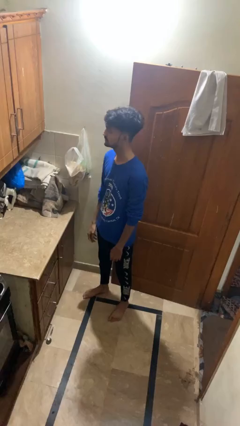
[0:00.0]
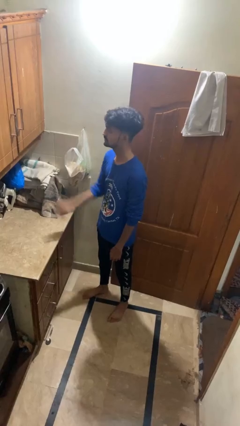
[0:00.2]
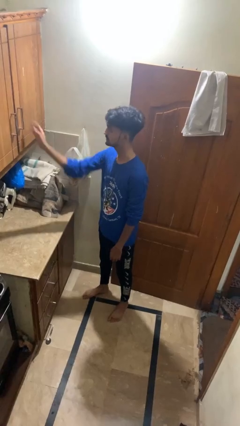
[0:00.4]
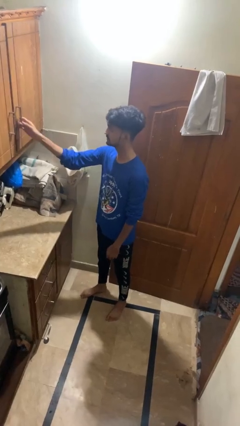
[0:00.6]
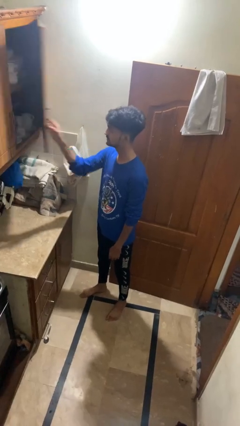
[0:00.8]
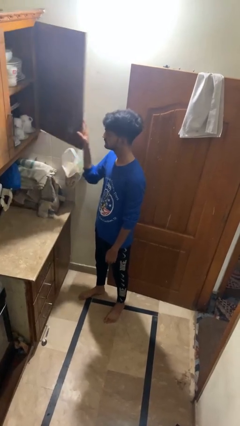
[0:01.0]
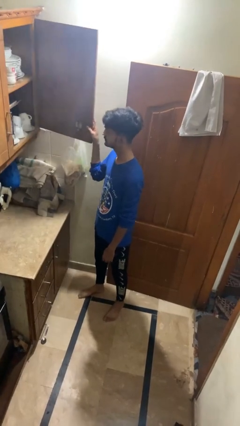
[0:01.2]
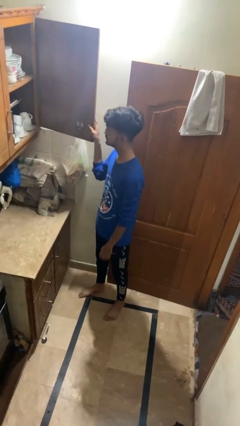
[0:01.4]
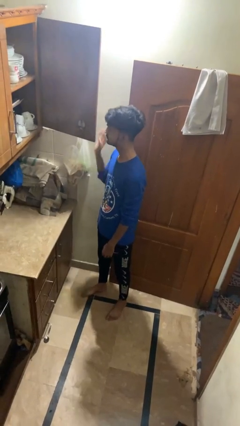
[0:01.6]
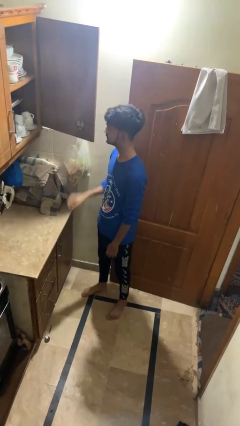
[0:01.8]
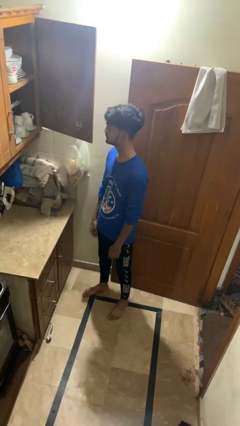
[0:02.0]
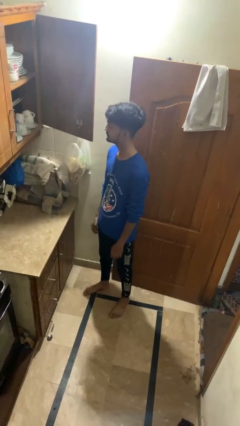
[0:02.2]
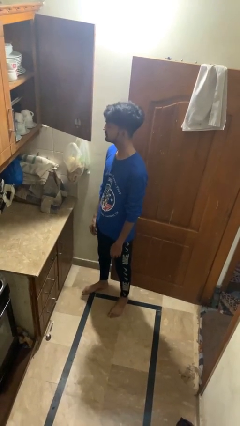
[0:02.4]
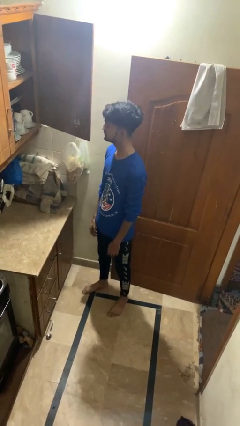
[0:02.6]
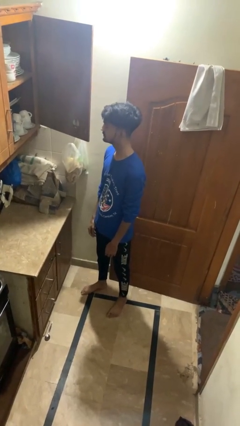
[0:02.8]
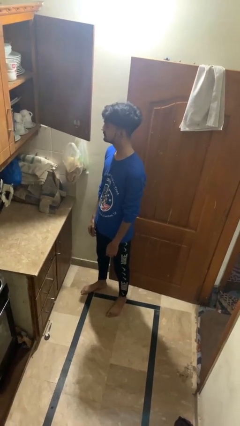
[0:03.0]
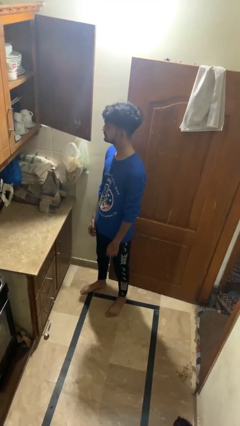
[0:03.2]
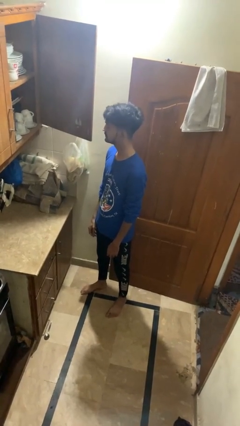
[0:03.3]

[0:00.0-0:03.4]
person opens cabinet

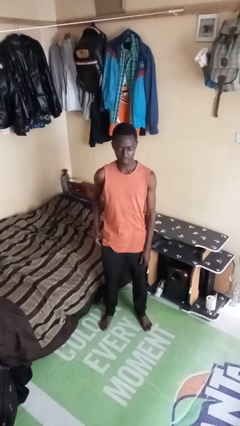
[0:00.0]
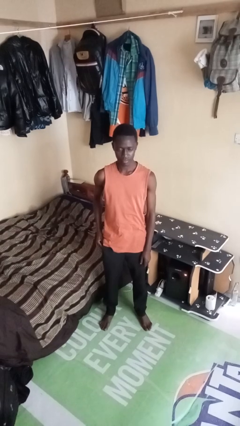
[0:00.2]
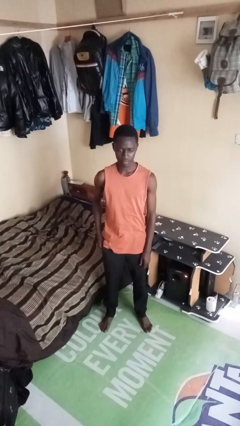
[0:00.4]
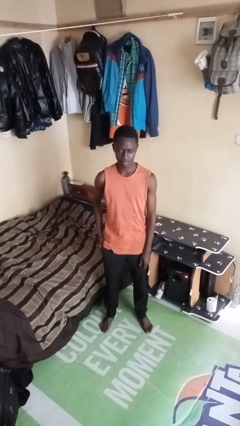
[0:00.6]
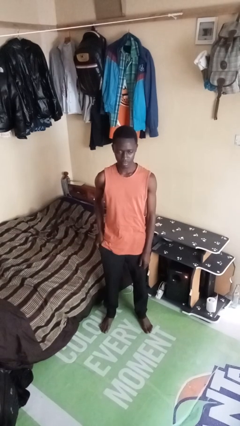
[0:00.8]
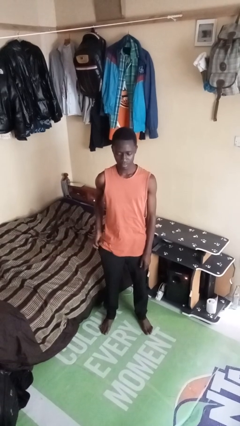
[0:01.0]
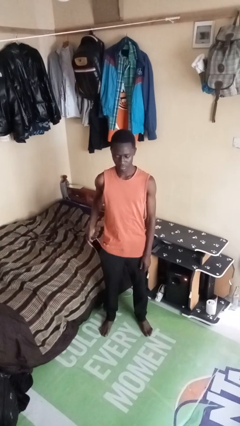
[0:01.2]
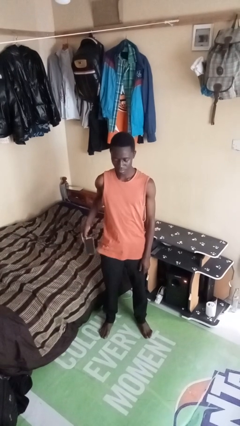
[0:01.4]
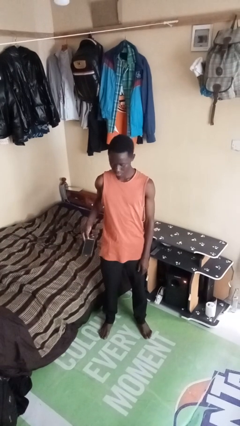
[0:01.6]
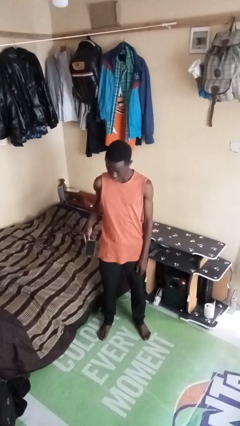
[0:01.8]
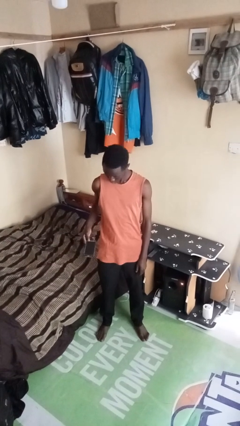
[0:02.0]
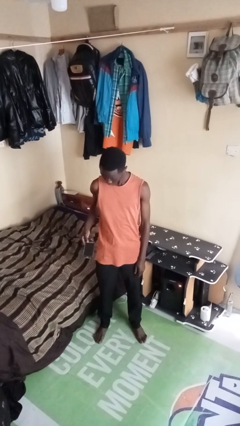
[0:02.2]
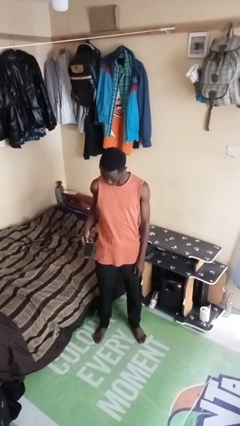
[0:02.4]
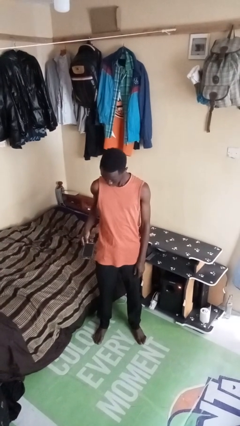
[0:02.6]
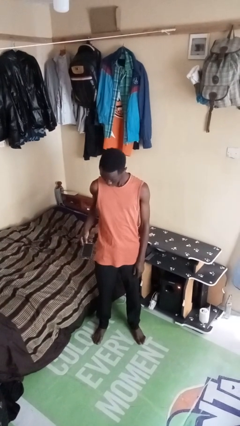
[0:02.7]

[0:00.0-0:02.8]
person takes phone from pocket

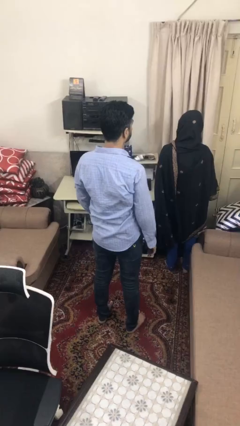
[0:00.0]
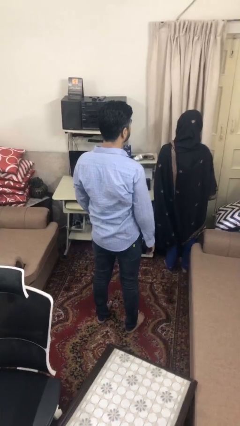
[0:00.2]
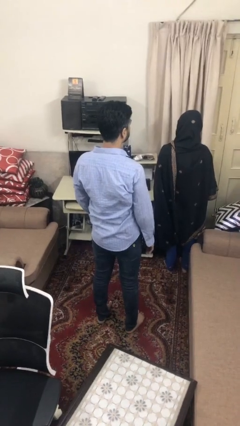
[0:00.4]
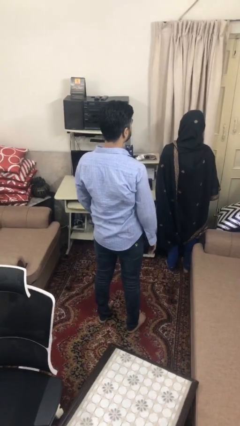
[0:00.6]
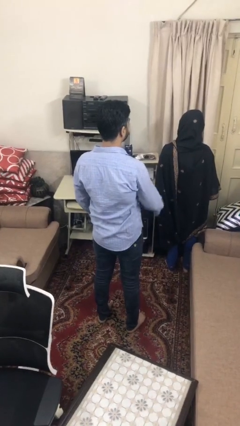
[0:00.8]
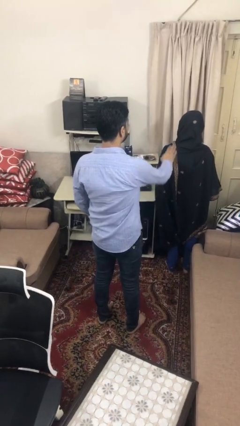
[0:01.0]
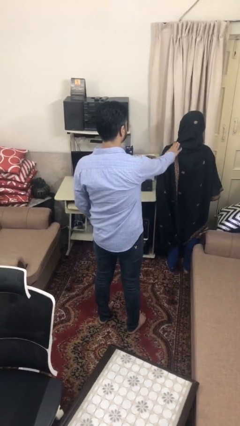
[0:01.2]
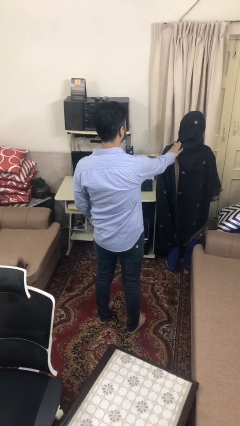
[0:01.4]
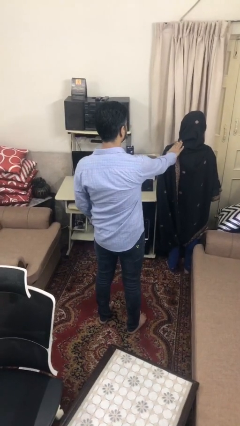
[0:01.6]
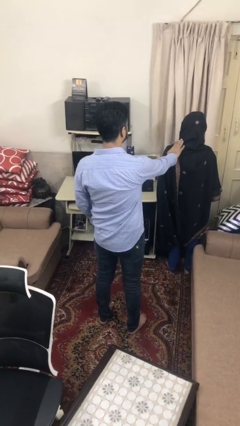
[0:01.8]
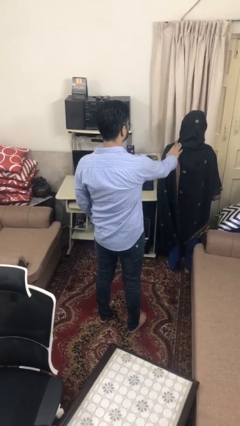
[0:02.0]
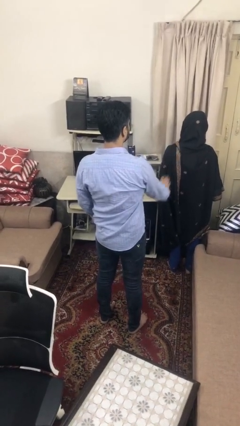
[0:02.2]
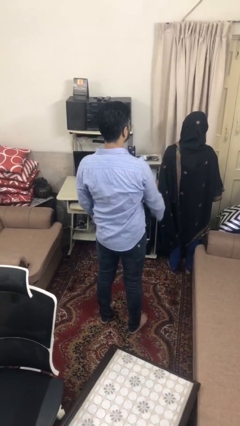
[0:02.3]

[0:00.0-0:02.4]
person touches back of person

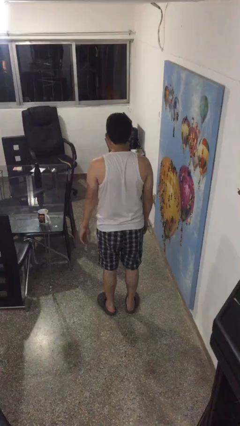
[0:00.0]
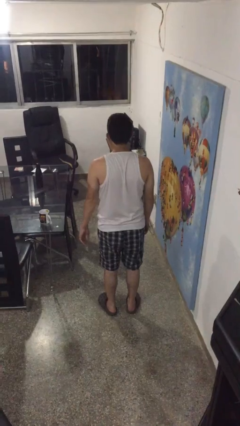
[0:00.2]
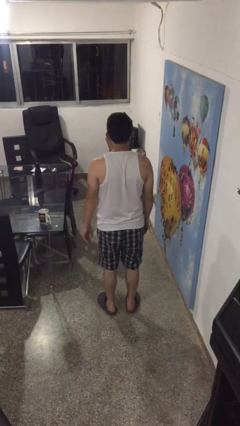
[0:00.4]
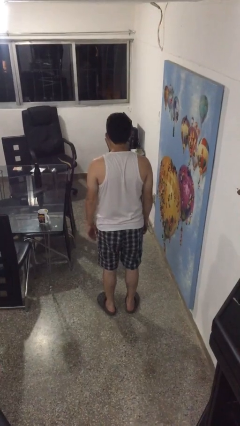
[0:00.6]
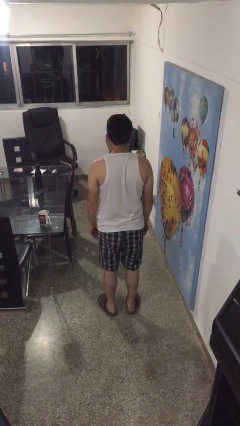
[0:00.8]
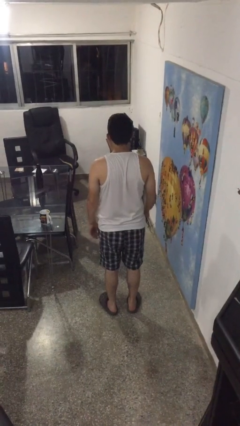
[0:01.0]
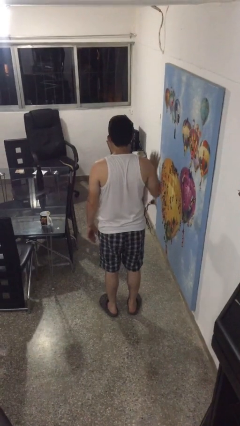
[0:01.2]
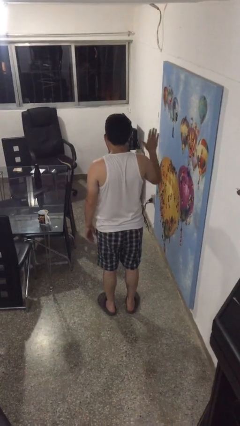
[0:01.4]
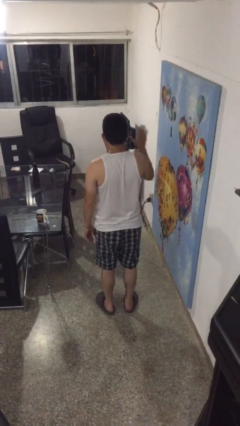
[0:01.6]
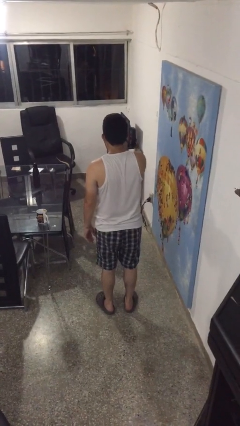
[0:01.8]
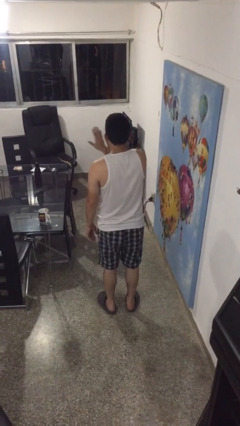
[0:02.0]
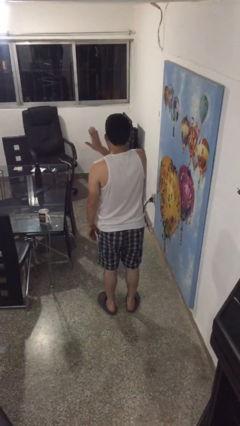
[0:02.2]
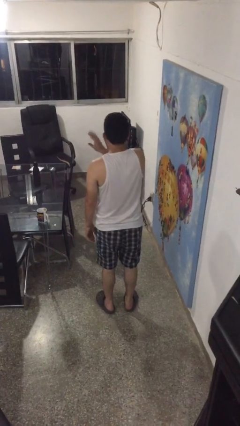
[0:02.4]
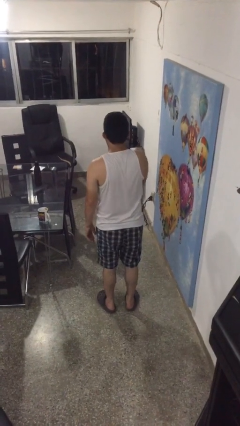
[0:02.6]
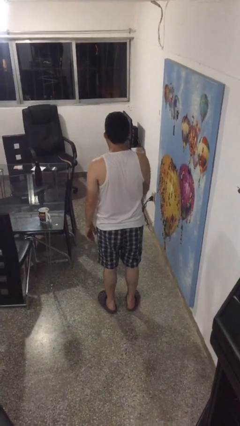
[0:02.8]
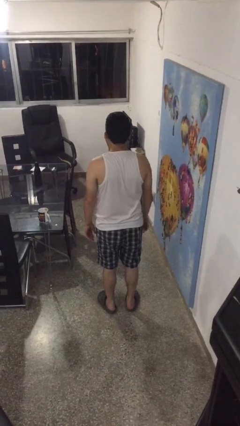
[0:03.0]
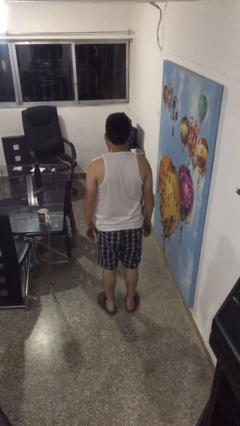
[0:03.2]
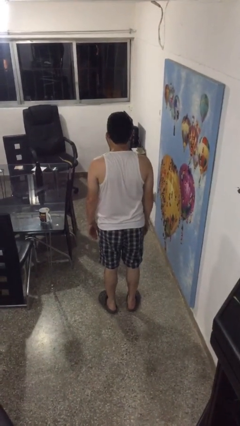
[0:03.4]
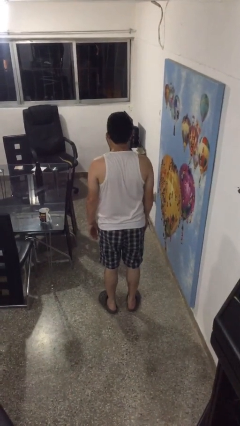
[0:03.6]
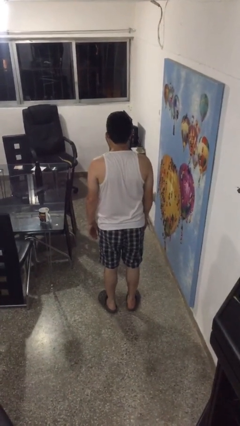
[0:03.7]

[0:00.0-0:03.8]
person gestures swipe left

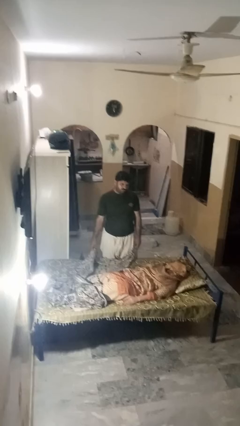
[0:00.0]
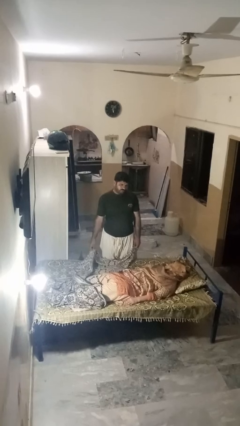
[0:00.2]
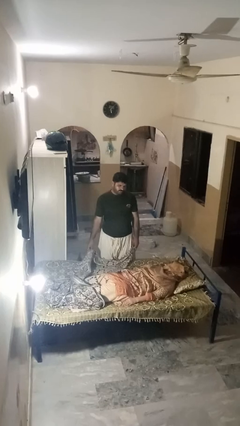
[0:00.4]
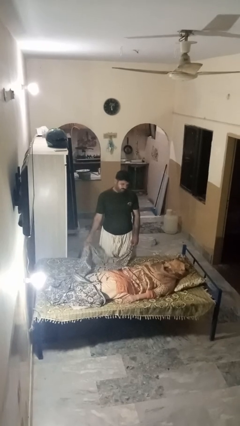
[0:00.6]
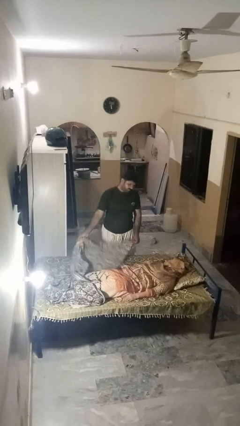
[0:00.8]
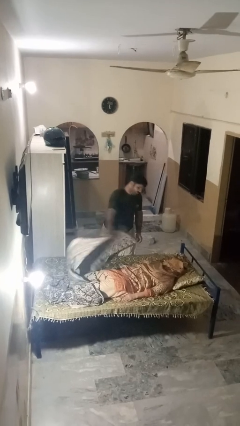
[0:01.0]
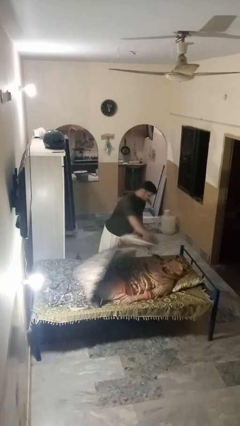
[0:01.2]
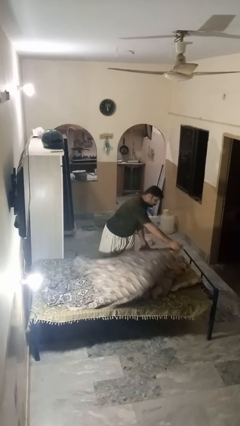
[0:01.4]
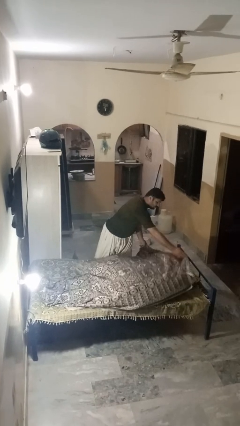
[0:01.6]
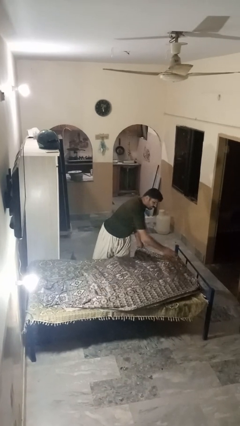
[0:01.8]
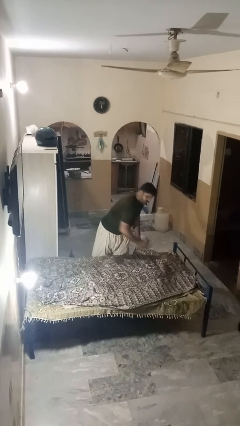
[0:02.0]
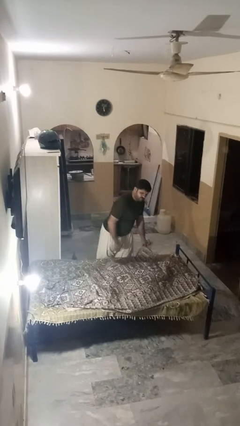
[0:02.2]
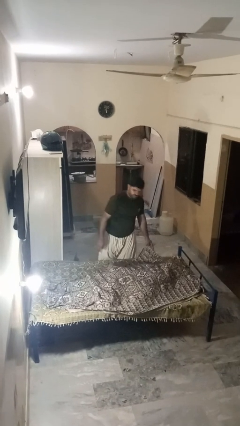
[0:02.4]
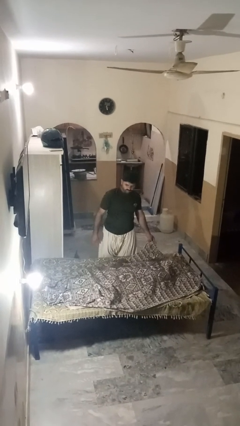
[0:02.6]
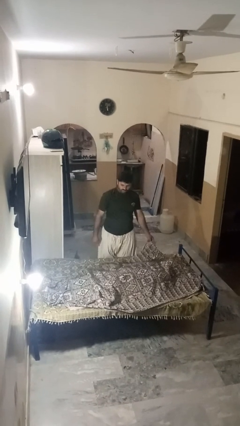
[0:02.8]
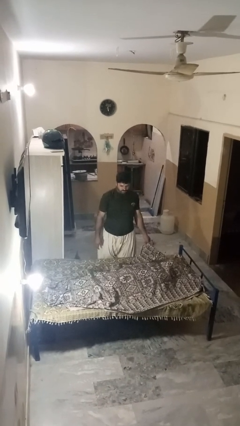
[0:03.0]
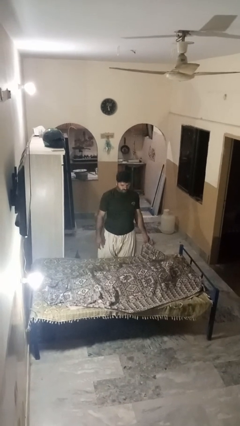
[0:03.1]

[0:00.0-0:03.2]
person covers friend with blanket

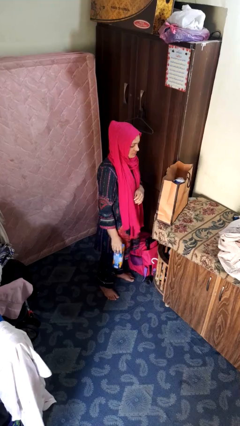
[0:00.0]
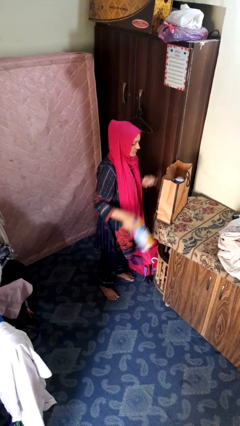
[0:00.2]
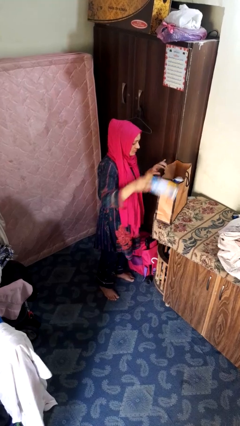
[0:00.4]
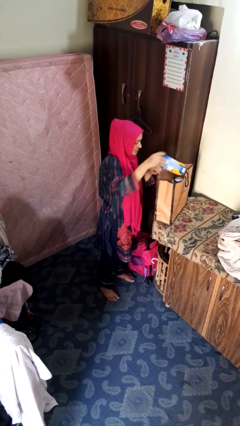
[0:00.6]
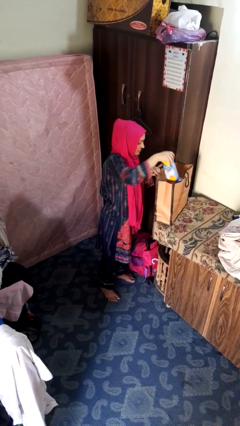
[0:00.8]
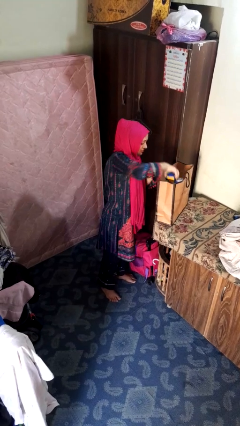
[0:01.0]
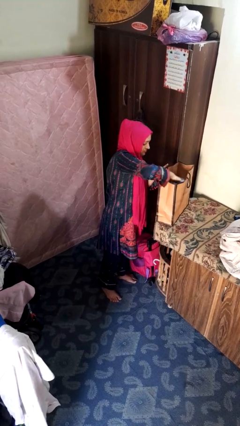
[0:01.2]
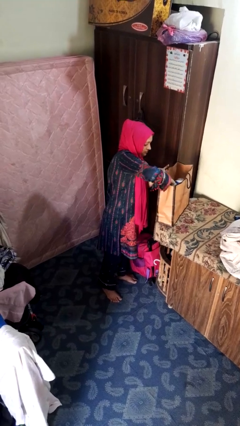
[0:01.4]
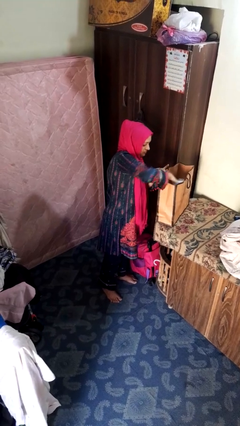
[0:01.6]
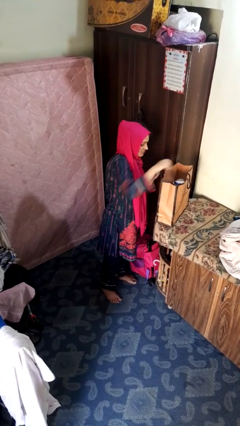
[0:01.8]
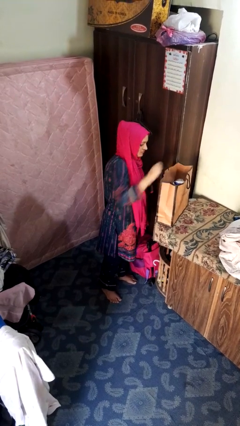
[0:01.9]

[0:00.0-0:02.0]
person puts object into bag
